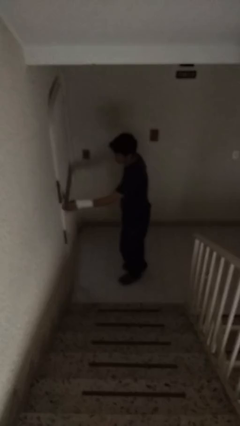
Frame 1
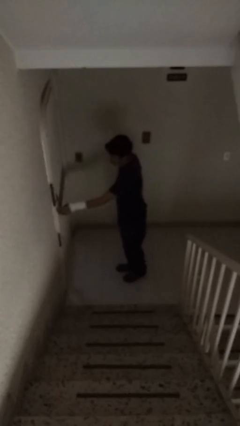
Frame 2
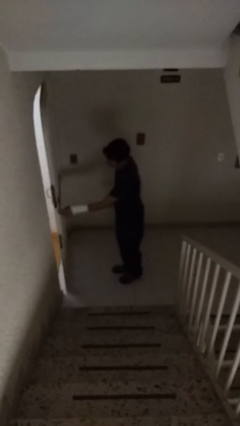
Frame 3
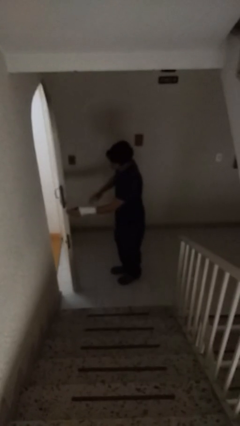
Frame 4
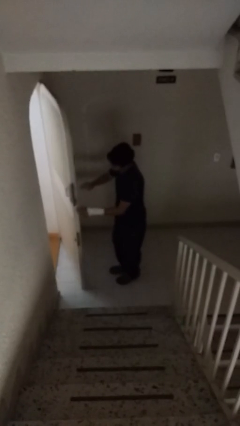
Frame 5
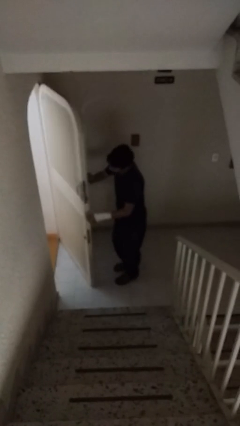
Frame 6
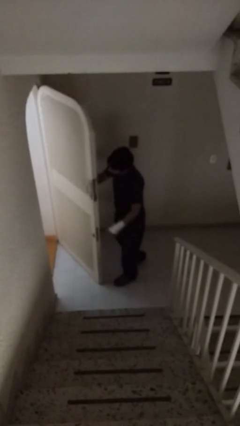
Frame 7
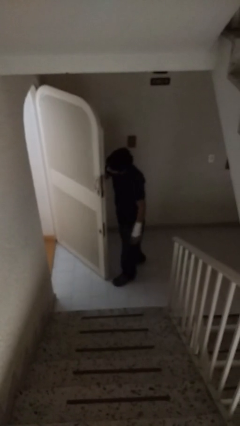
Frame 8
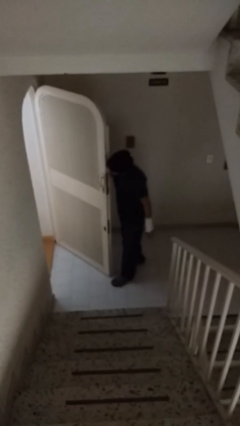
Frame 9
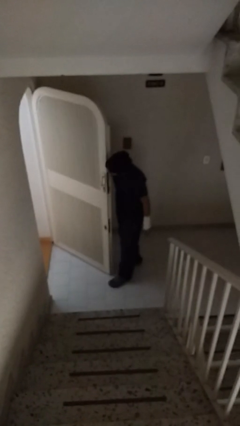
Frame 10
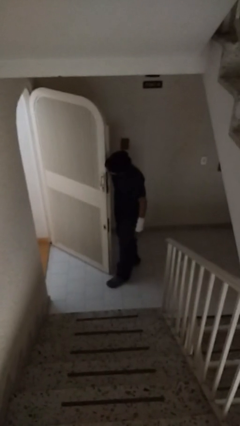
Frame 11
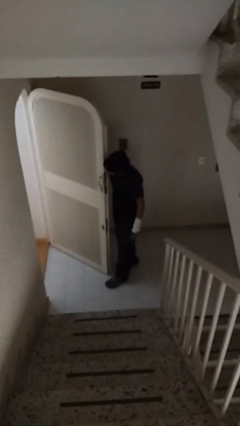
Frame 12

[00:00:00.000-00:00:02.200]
person opens facility door

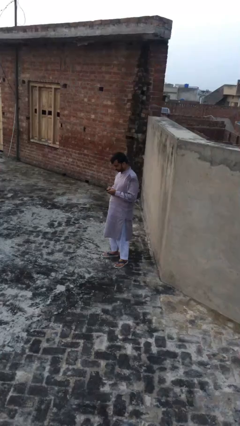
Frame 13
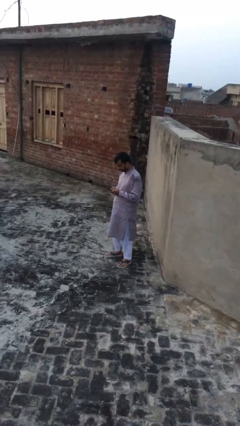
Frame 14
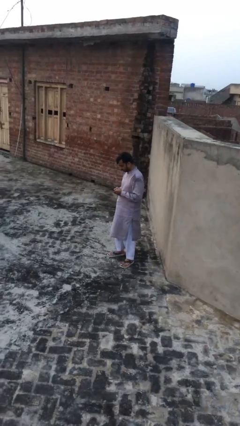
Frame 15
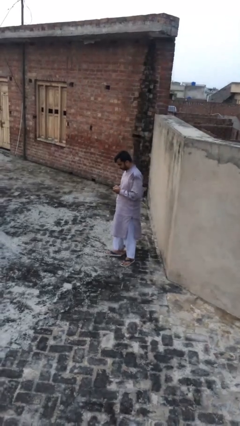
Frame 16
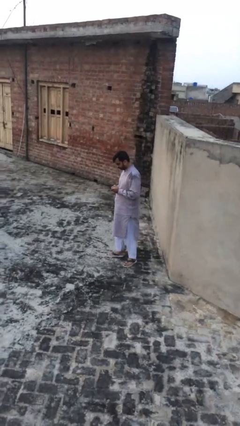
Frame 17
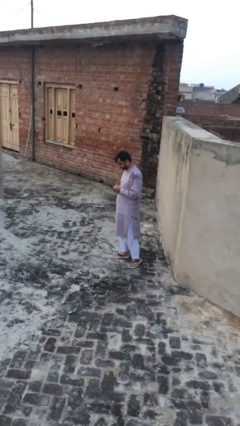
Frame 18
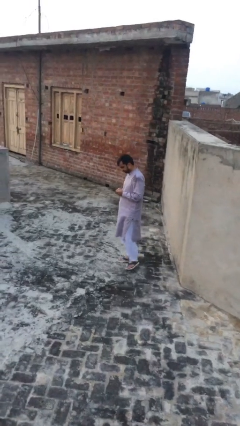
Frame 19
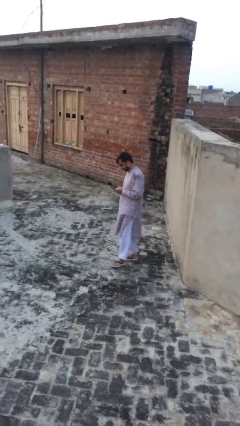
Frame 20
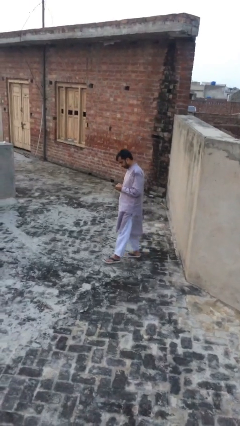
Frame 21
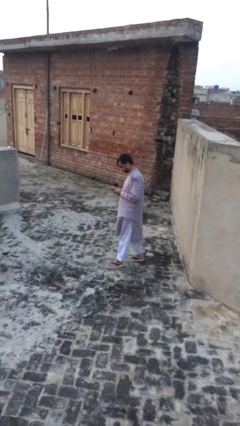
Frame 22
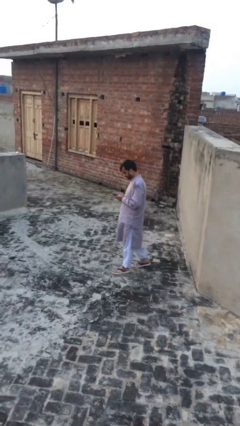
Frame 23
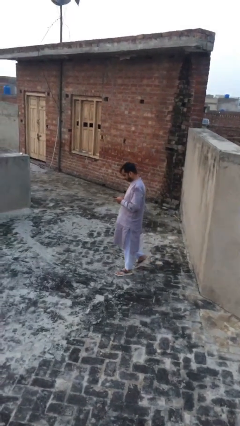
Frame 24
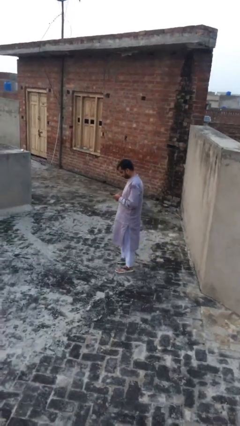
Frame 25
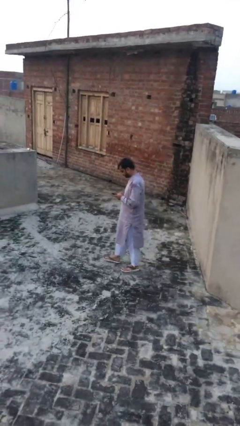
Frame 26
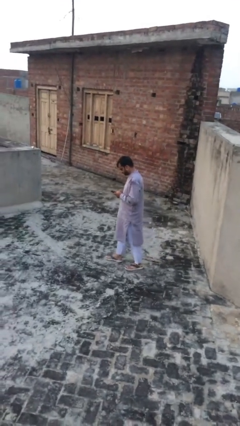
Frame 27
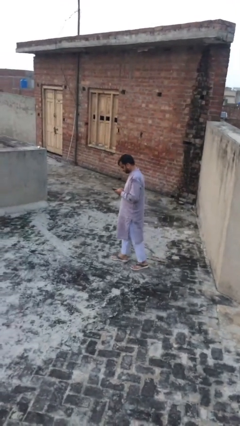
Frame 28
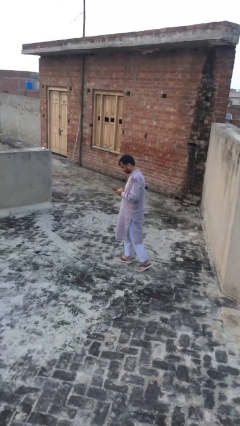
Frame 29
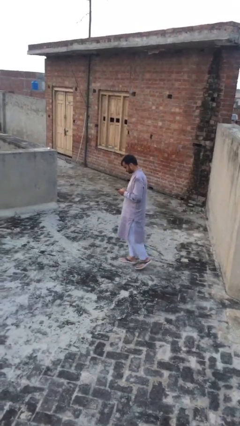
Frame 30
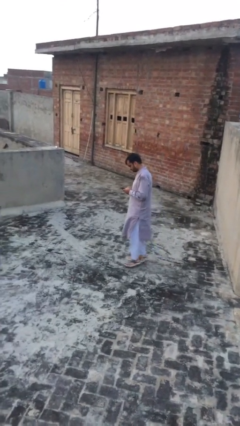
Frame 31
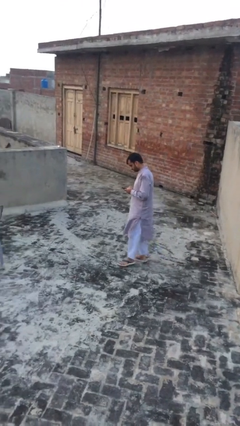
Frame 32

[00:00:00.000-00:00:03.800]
person texts on phone

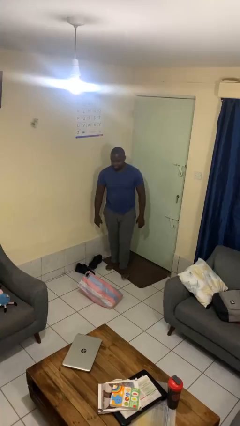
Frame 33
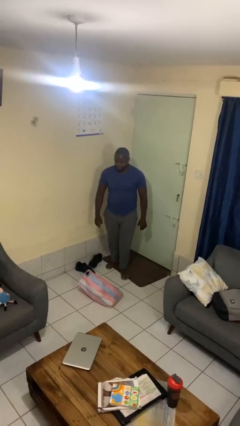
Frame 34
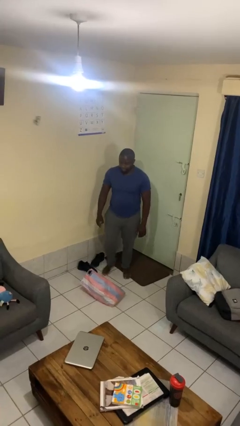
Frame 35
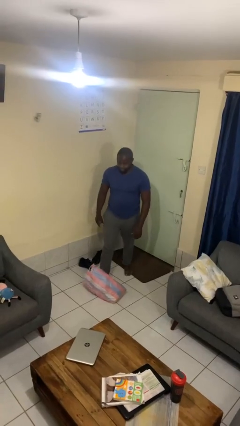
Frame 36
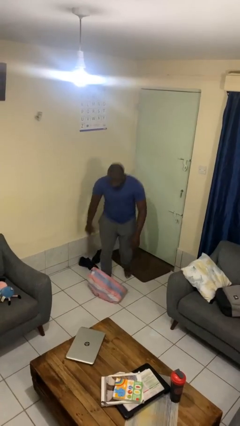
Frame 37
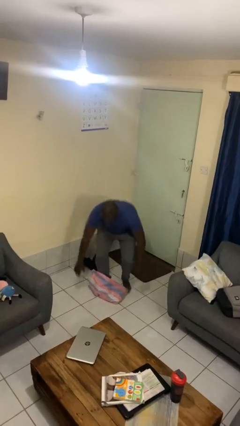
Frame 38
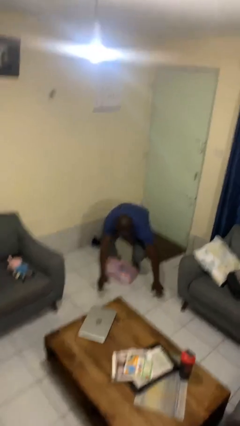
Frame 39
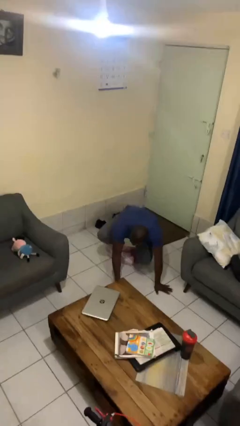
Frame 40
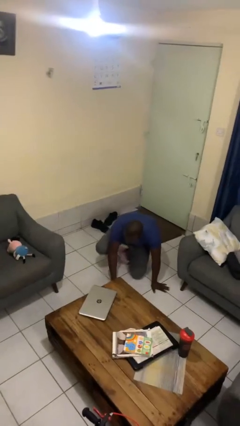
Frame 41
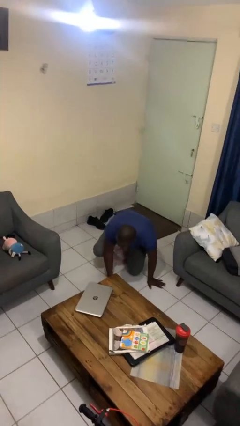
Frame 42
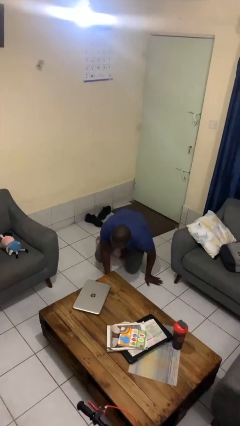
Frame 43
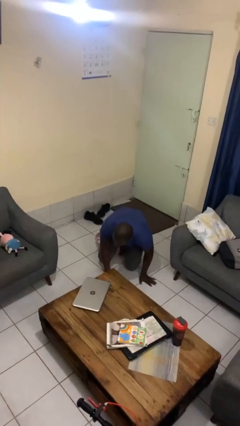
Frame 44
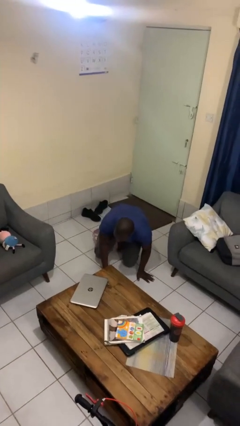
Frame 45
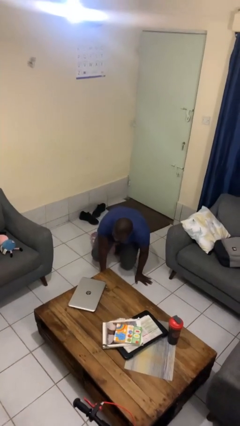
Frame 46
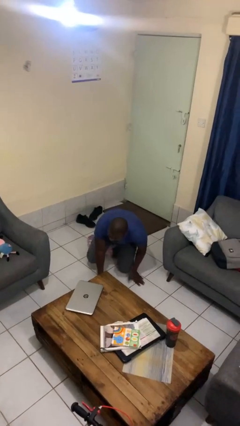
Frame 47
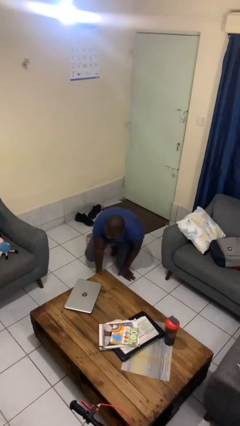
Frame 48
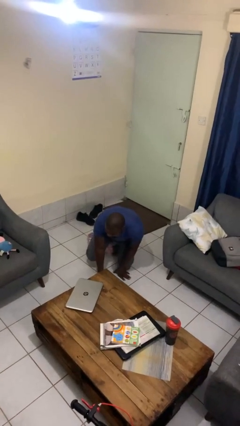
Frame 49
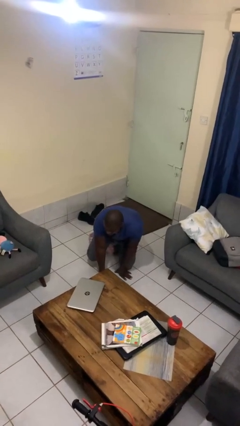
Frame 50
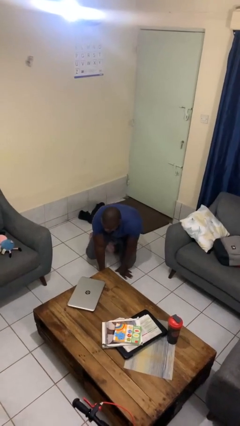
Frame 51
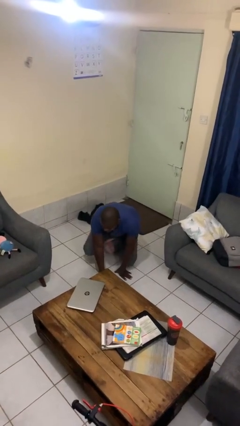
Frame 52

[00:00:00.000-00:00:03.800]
person trips on object on floor

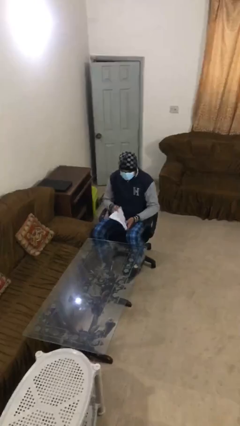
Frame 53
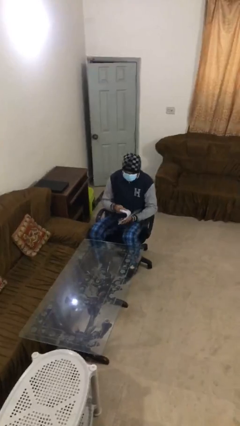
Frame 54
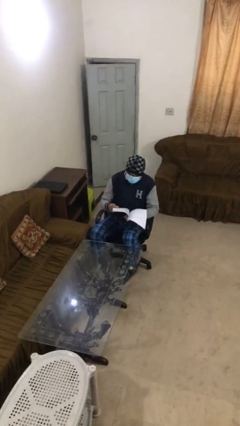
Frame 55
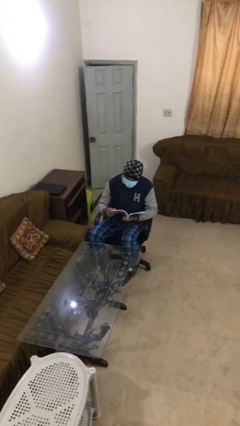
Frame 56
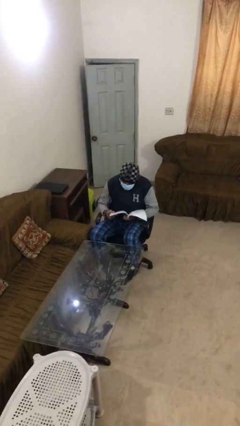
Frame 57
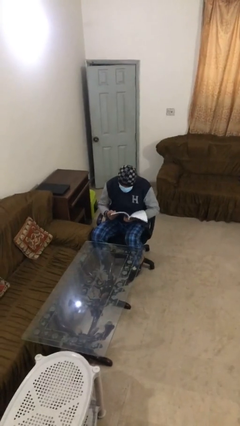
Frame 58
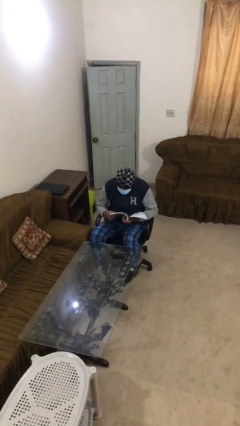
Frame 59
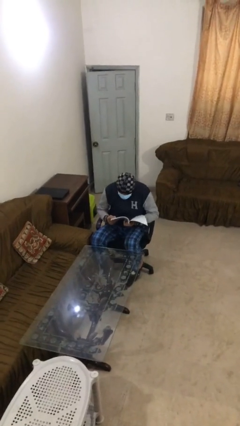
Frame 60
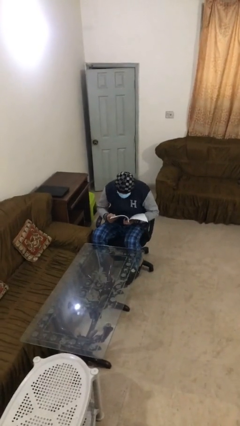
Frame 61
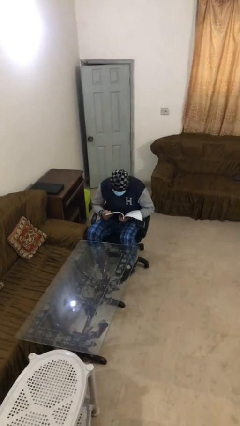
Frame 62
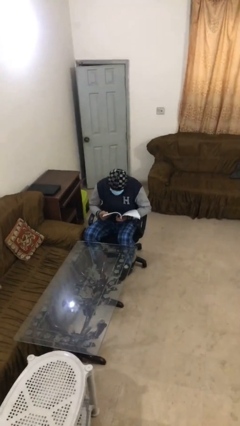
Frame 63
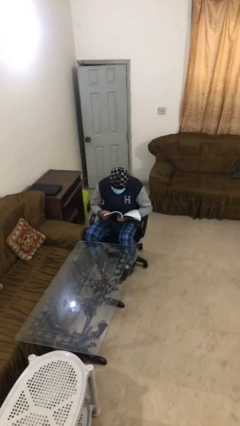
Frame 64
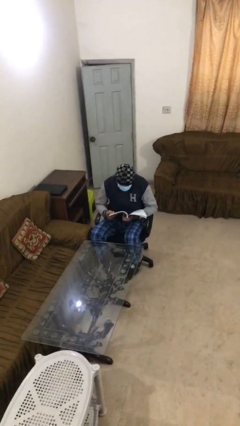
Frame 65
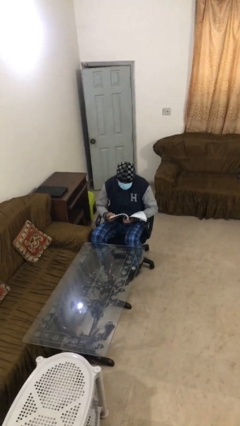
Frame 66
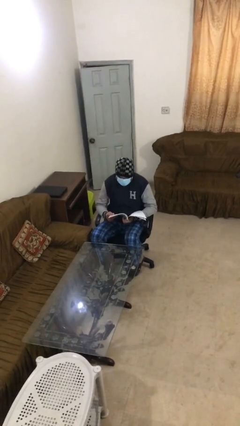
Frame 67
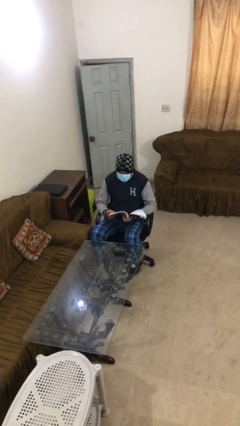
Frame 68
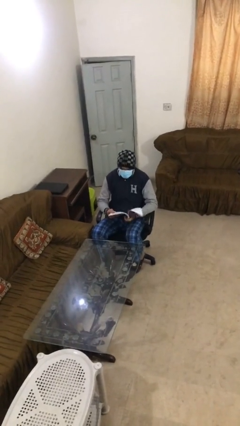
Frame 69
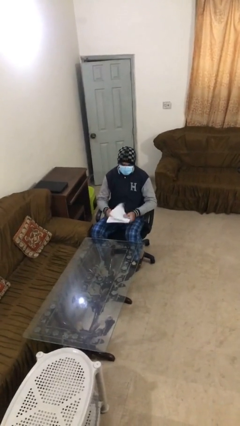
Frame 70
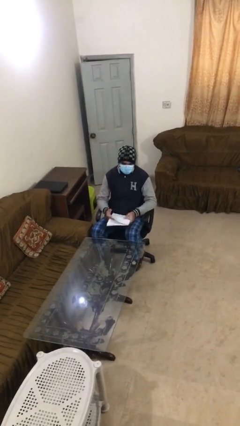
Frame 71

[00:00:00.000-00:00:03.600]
person reads document

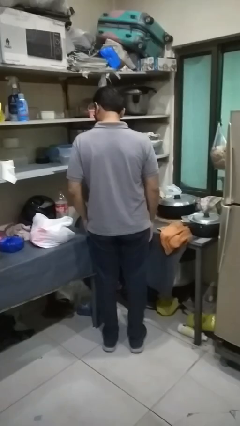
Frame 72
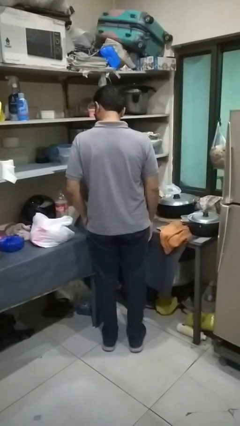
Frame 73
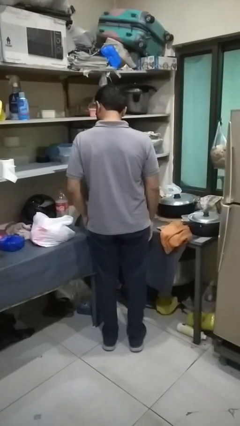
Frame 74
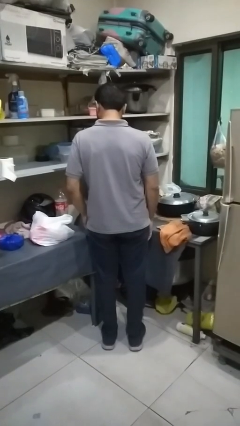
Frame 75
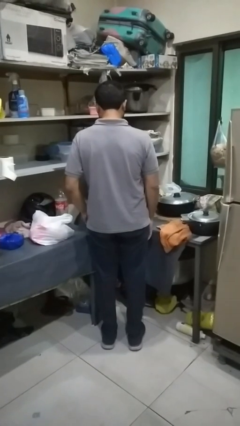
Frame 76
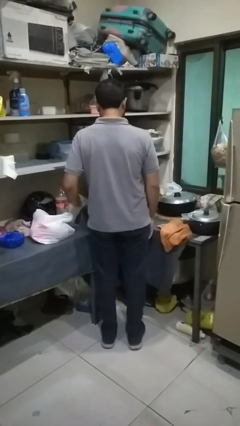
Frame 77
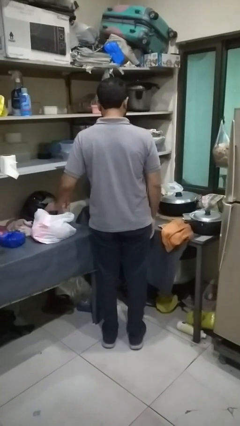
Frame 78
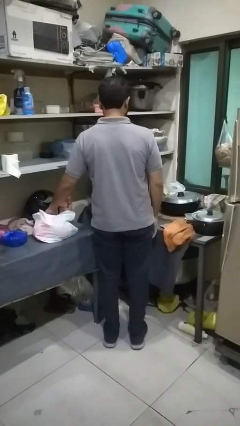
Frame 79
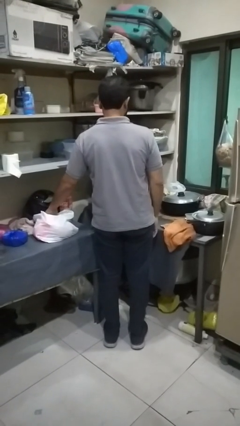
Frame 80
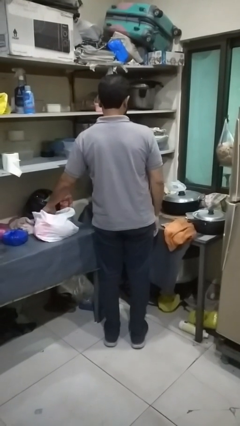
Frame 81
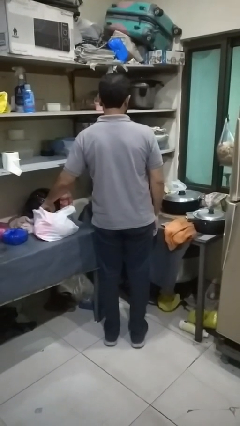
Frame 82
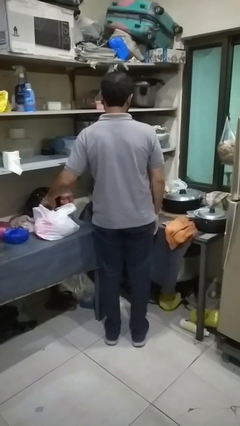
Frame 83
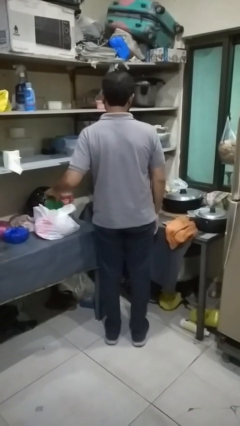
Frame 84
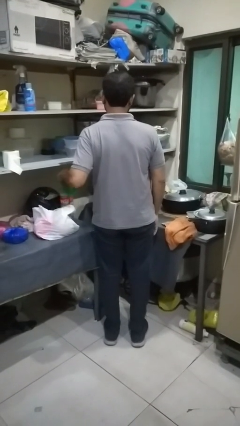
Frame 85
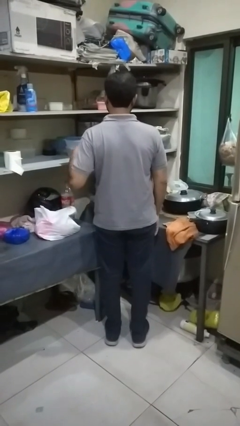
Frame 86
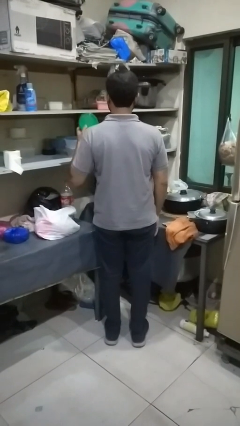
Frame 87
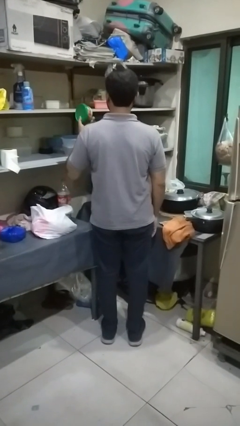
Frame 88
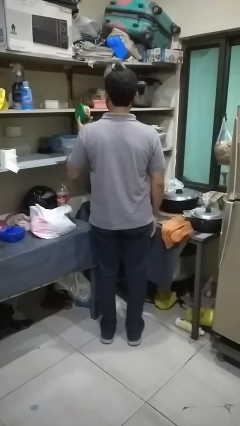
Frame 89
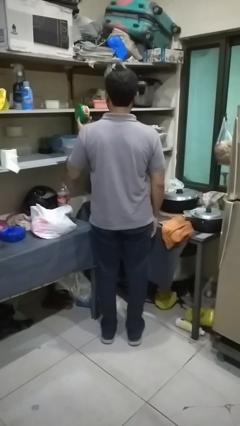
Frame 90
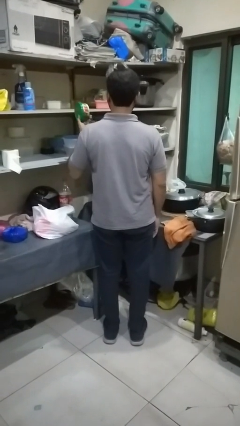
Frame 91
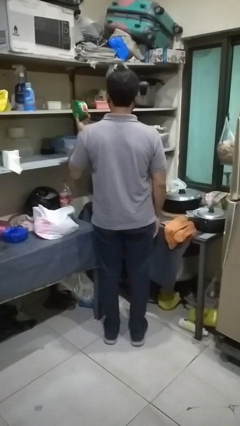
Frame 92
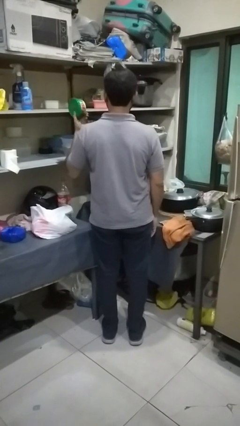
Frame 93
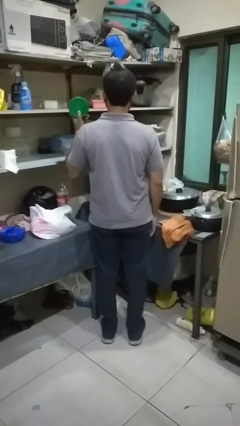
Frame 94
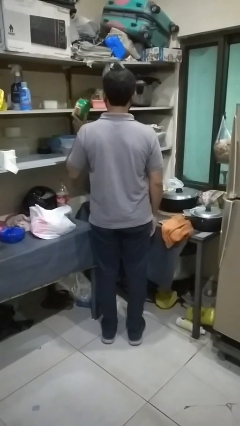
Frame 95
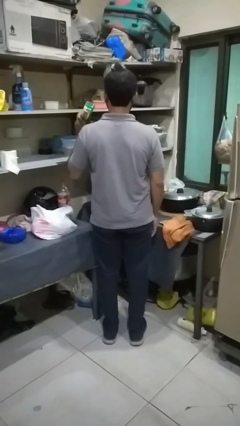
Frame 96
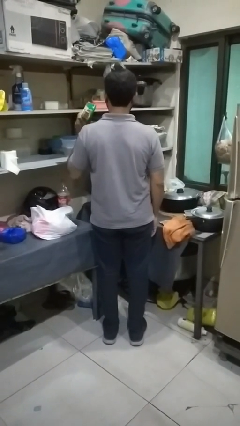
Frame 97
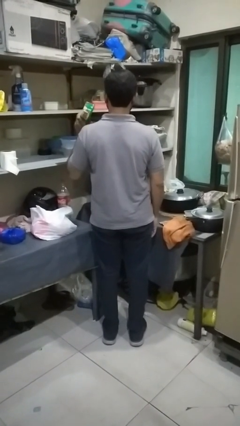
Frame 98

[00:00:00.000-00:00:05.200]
person takes object from bag
